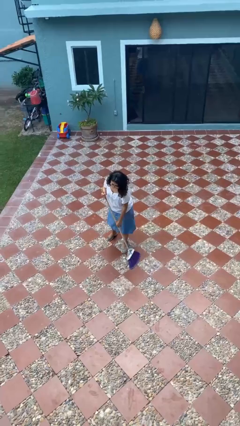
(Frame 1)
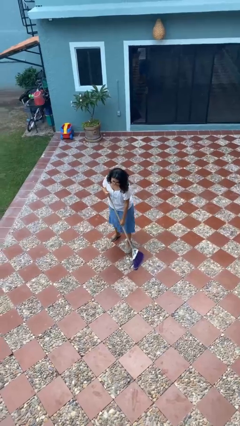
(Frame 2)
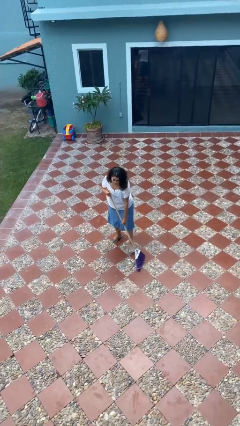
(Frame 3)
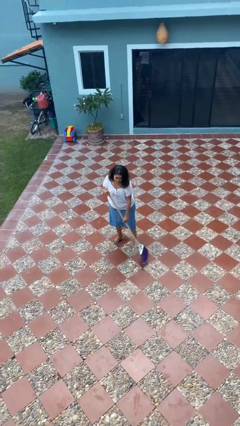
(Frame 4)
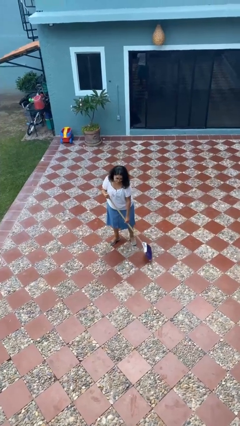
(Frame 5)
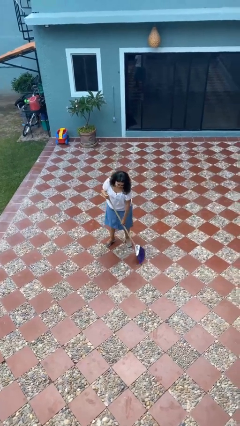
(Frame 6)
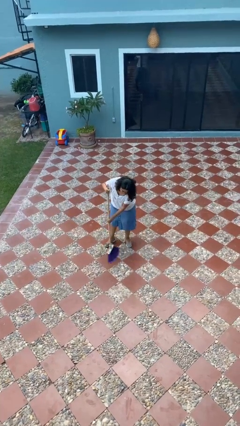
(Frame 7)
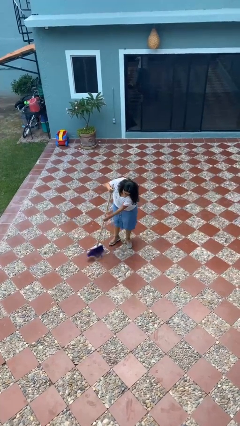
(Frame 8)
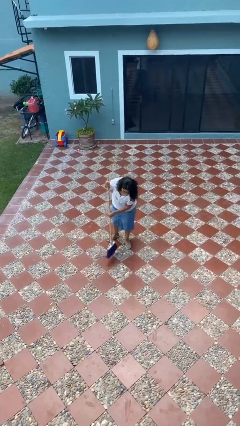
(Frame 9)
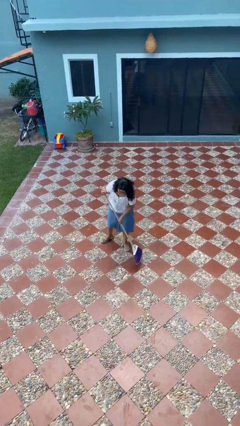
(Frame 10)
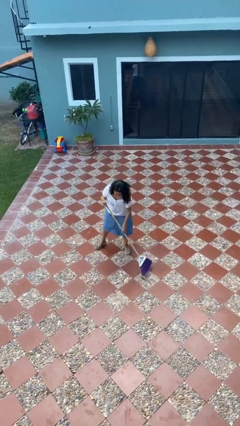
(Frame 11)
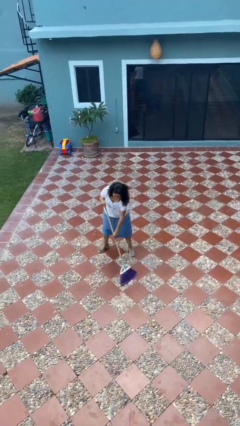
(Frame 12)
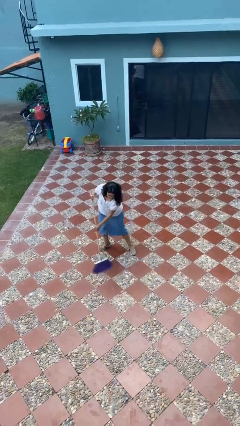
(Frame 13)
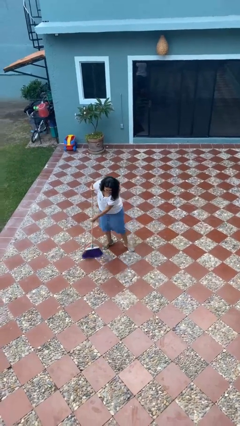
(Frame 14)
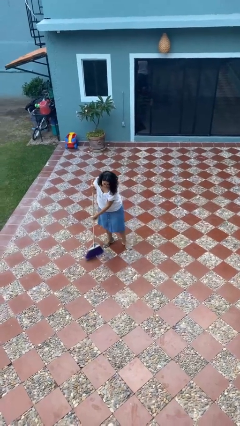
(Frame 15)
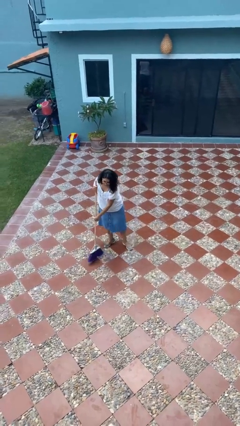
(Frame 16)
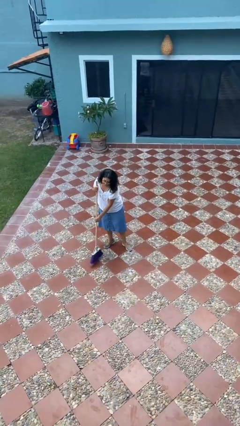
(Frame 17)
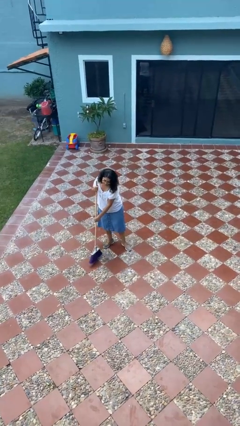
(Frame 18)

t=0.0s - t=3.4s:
person sweeps floor

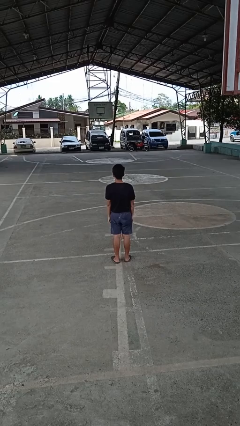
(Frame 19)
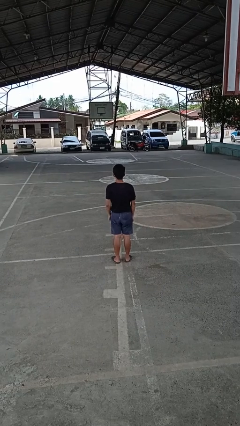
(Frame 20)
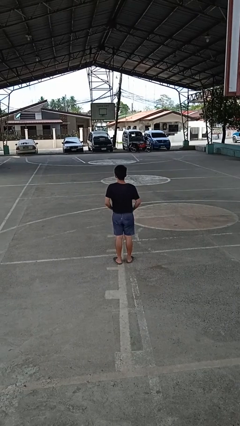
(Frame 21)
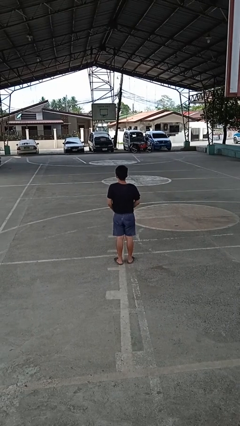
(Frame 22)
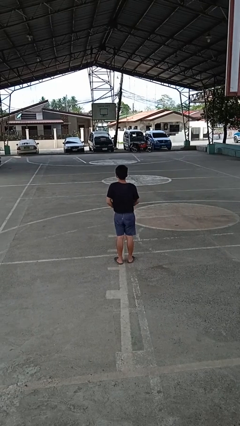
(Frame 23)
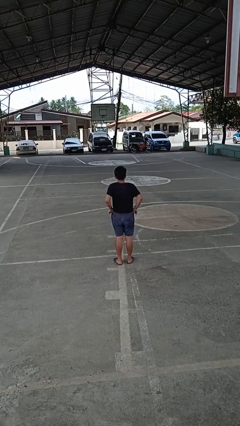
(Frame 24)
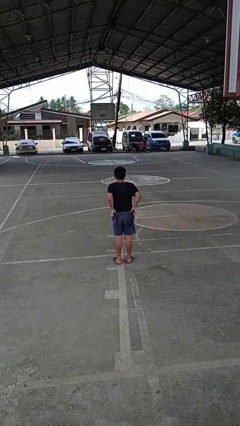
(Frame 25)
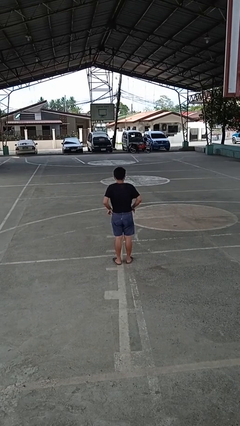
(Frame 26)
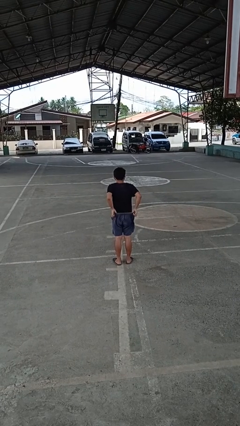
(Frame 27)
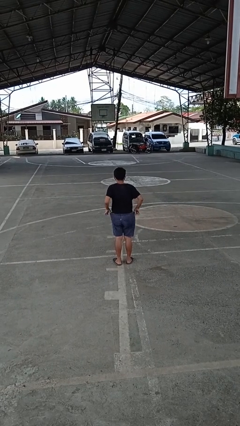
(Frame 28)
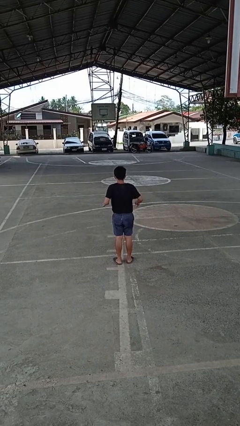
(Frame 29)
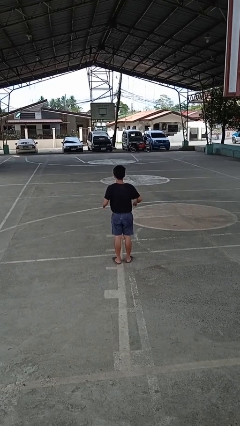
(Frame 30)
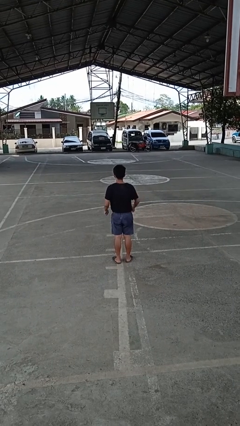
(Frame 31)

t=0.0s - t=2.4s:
person hikes up pants

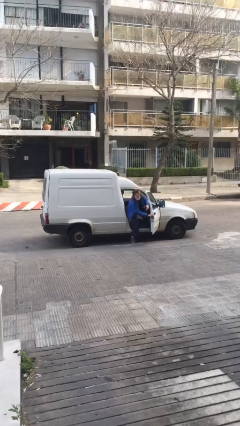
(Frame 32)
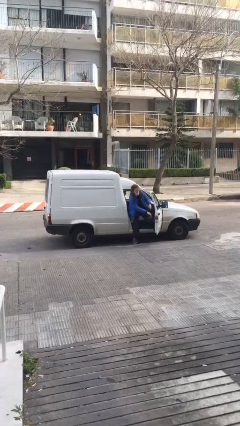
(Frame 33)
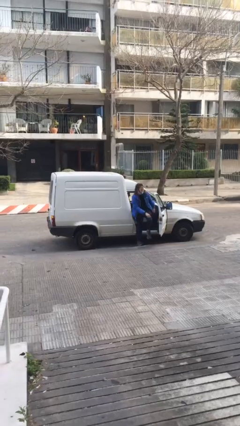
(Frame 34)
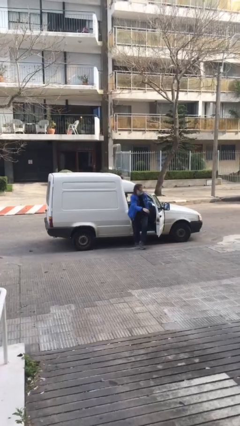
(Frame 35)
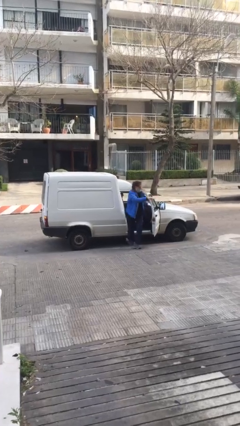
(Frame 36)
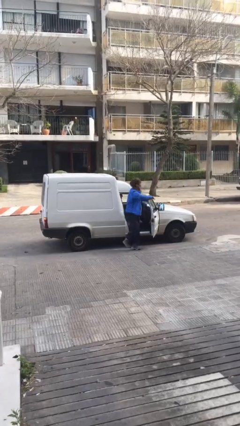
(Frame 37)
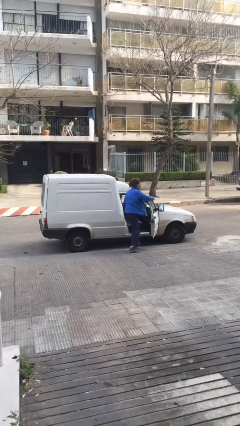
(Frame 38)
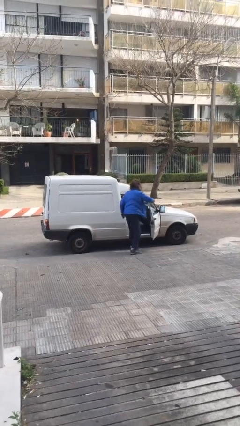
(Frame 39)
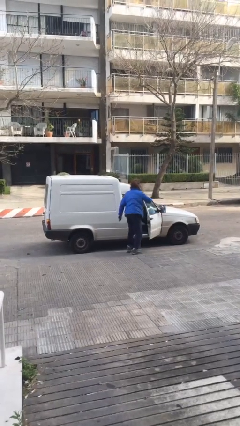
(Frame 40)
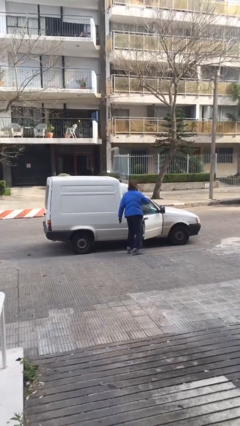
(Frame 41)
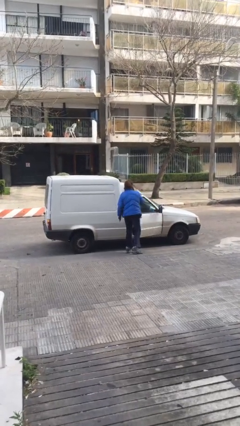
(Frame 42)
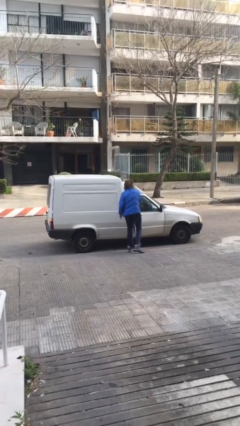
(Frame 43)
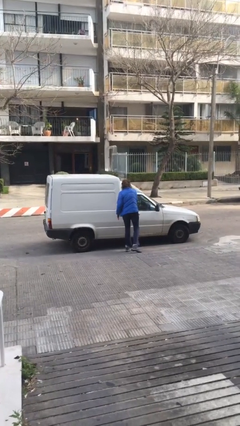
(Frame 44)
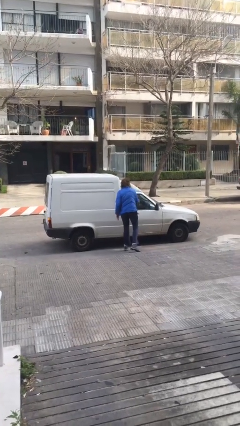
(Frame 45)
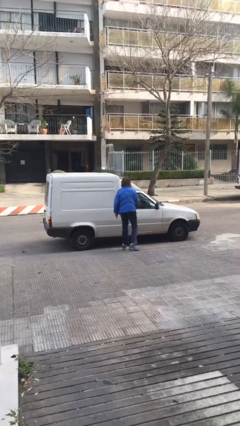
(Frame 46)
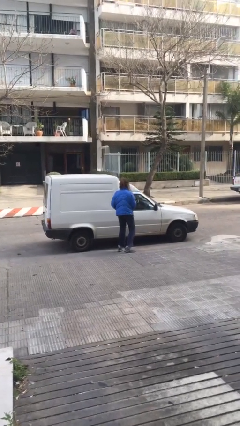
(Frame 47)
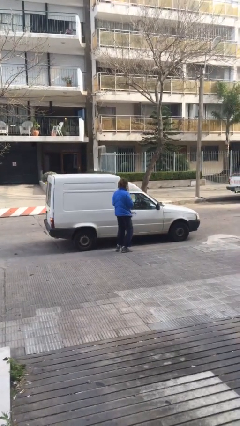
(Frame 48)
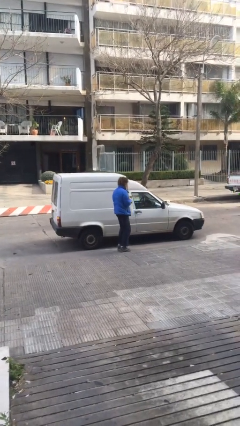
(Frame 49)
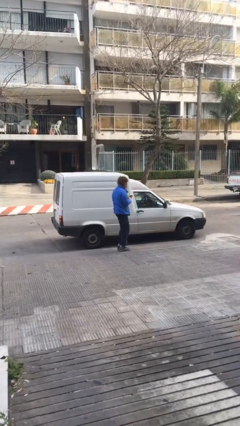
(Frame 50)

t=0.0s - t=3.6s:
car drops off person

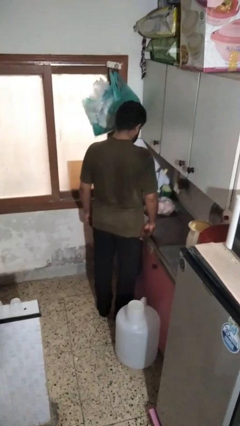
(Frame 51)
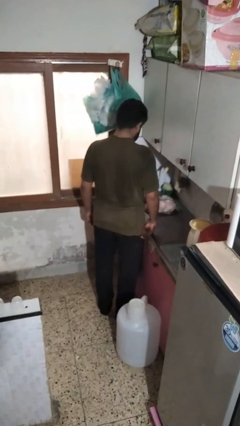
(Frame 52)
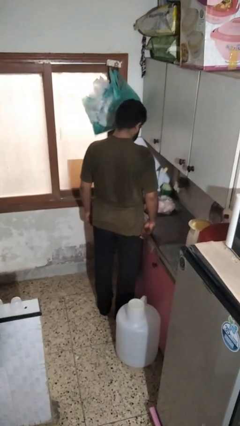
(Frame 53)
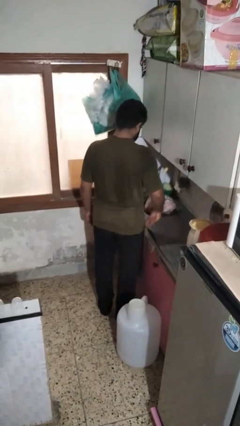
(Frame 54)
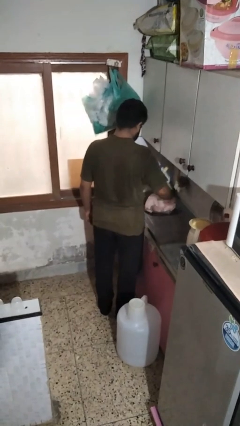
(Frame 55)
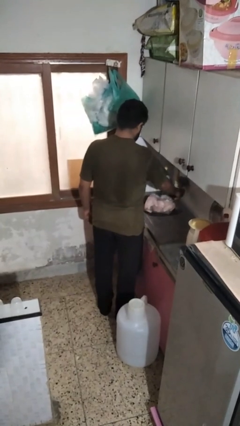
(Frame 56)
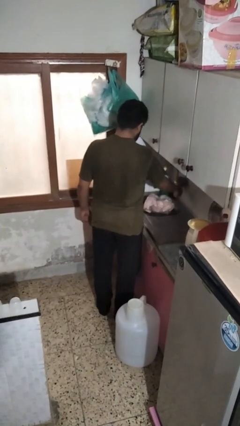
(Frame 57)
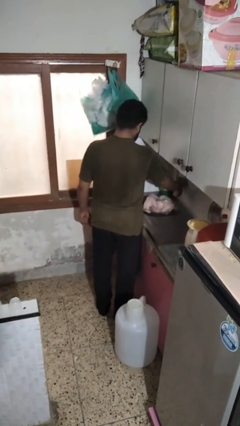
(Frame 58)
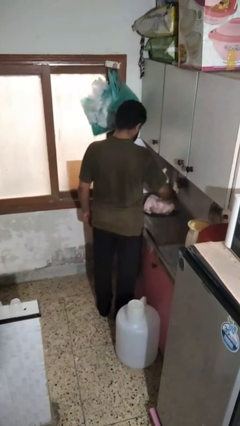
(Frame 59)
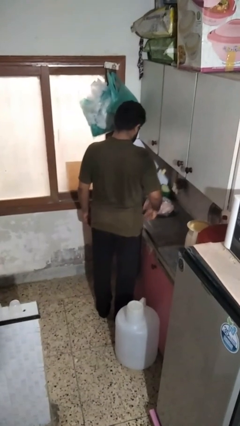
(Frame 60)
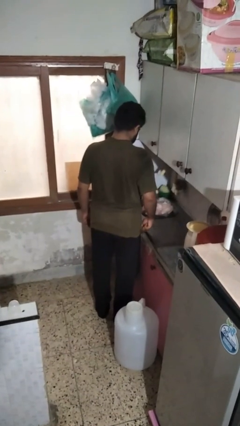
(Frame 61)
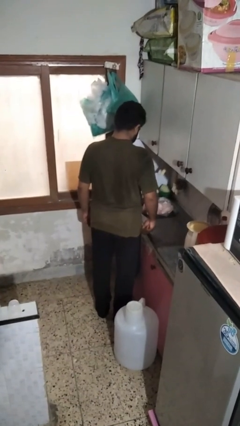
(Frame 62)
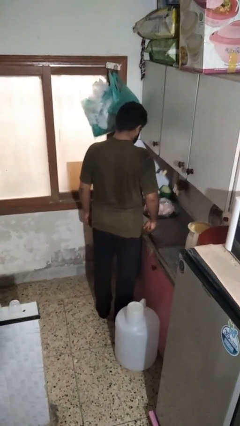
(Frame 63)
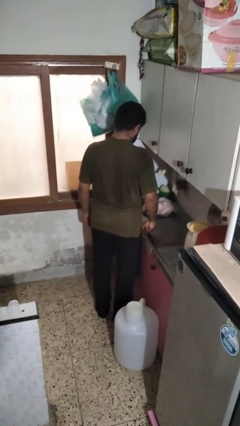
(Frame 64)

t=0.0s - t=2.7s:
person turns off faucet

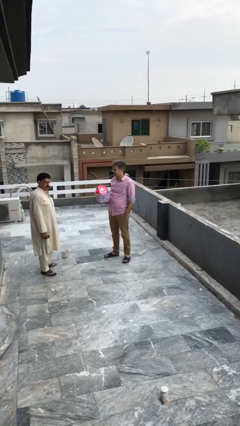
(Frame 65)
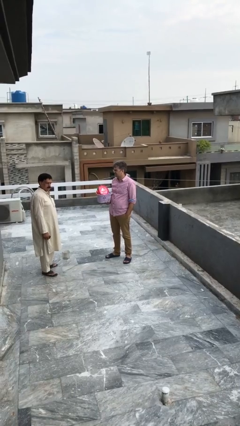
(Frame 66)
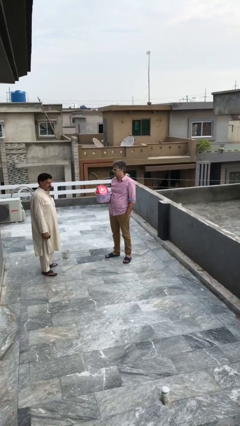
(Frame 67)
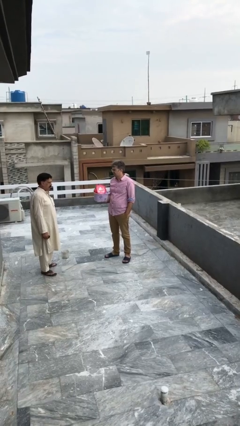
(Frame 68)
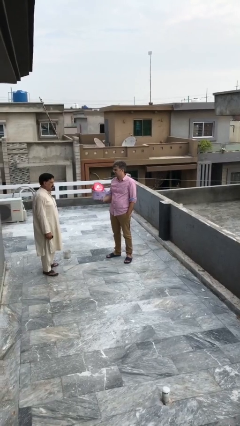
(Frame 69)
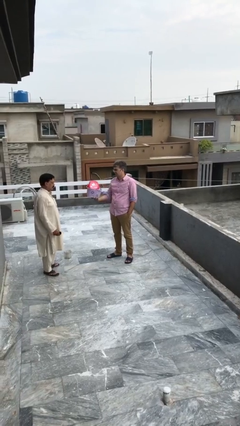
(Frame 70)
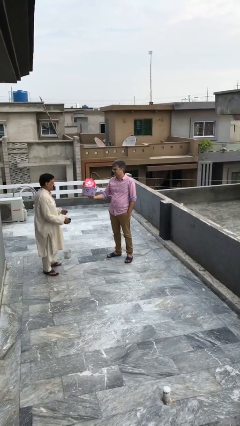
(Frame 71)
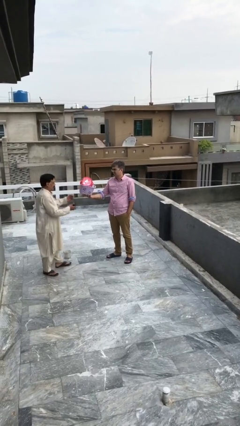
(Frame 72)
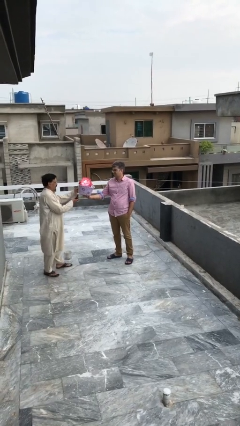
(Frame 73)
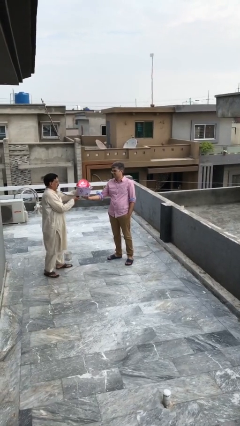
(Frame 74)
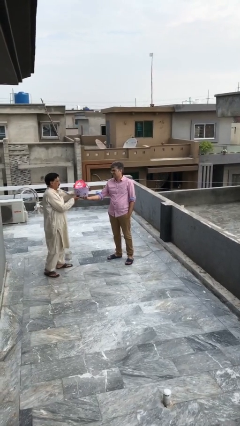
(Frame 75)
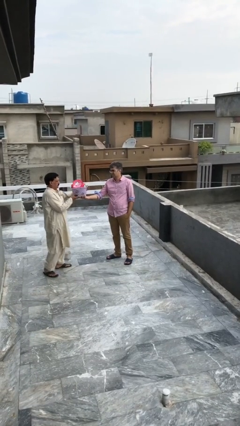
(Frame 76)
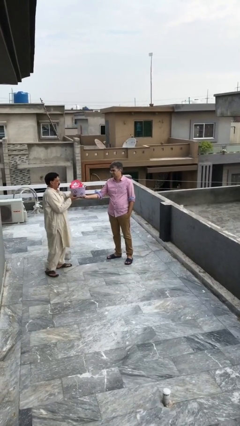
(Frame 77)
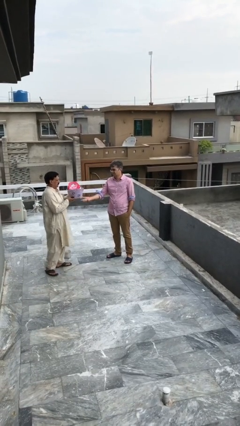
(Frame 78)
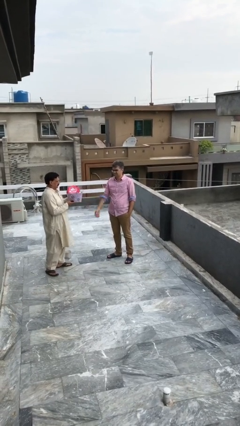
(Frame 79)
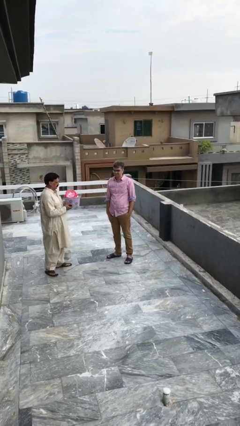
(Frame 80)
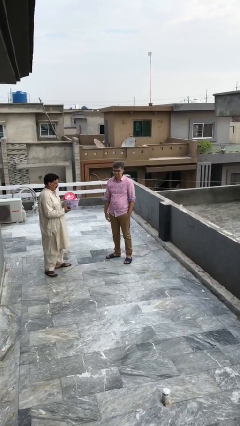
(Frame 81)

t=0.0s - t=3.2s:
person transfers object to person

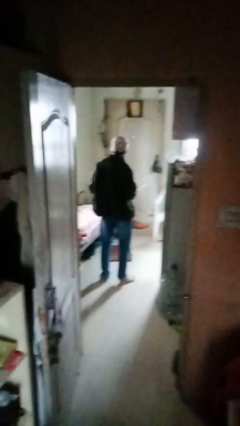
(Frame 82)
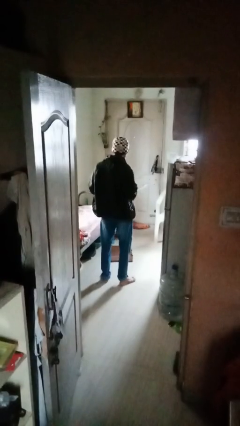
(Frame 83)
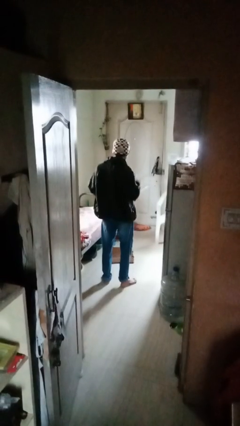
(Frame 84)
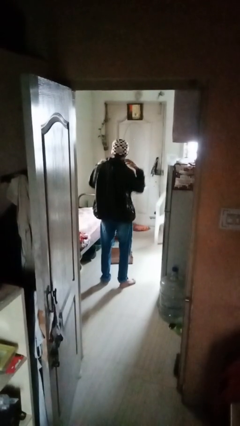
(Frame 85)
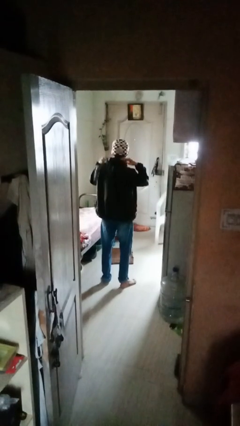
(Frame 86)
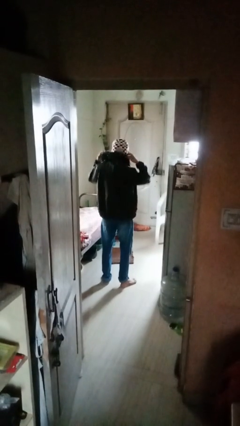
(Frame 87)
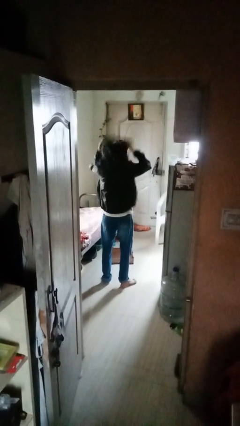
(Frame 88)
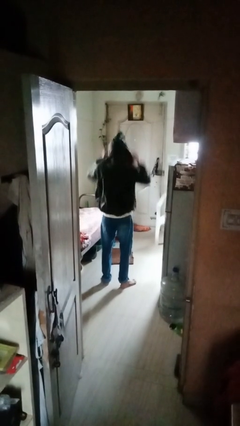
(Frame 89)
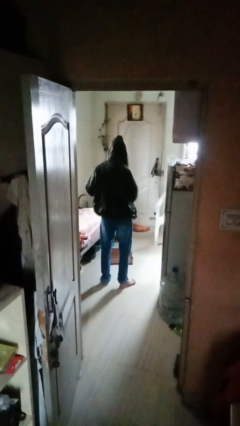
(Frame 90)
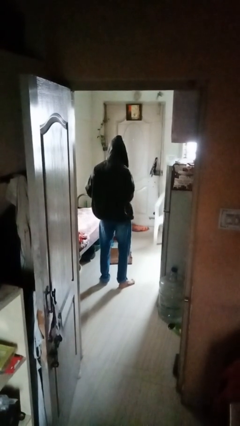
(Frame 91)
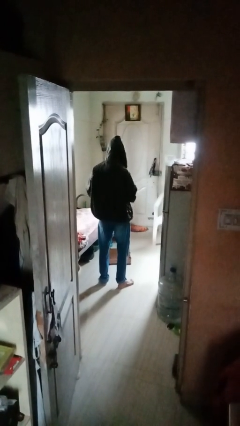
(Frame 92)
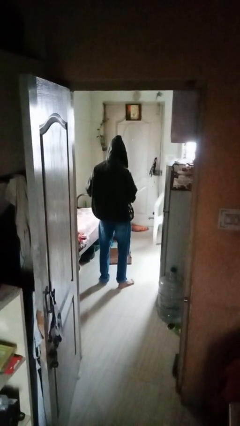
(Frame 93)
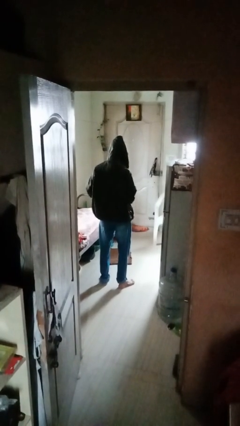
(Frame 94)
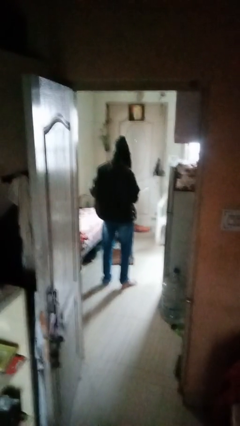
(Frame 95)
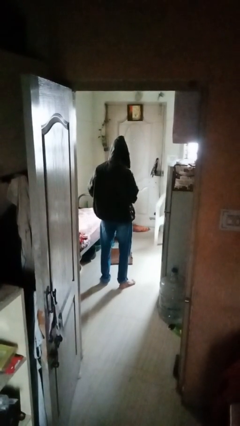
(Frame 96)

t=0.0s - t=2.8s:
person puts on hoodie
